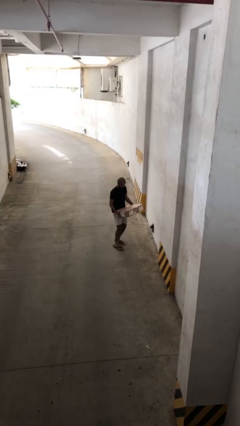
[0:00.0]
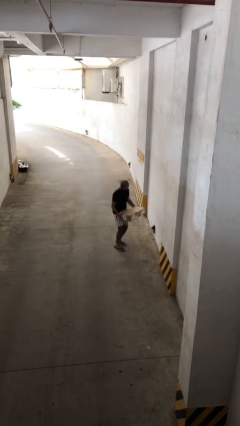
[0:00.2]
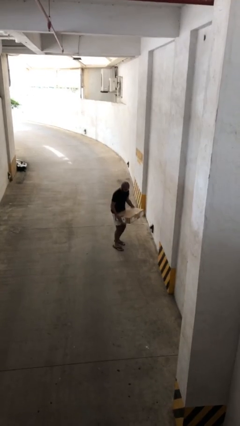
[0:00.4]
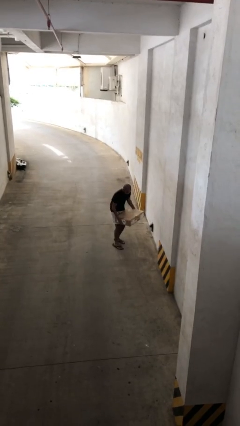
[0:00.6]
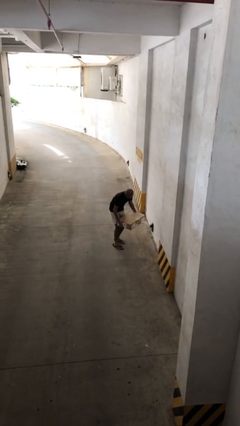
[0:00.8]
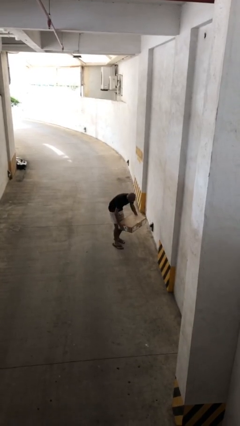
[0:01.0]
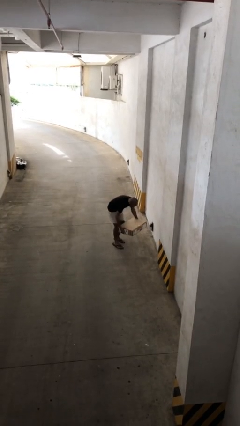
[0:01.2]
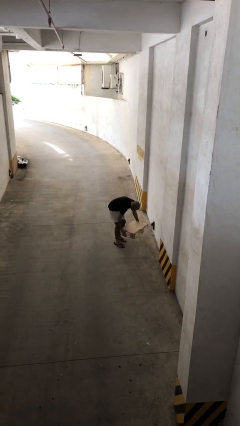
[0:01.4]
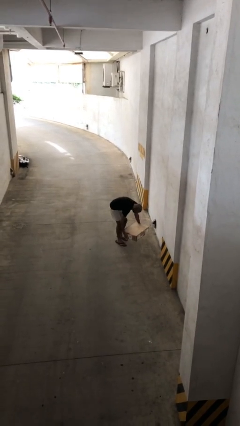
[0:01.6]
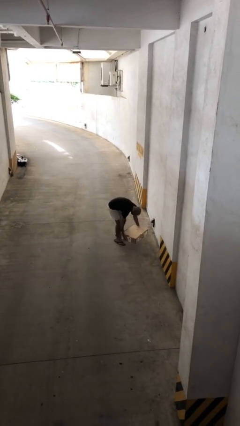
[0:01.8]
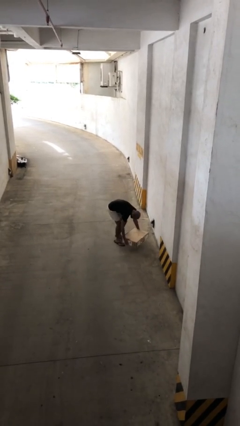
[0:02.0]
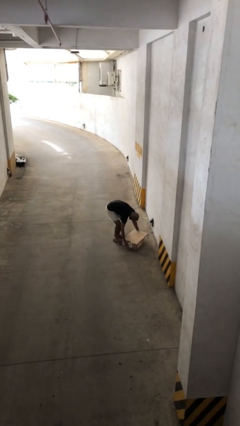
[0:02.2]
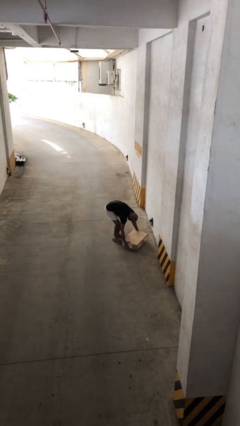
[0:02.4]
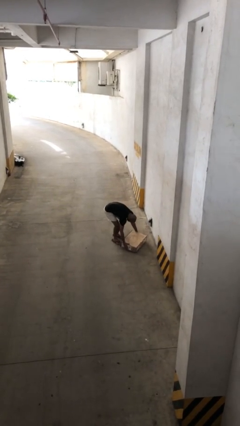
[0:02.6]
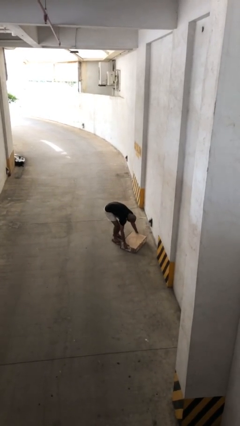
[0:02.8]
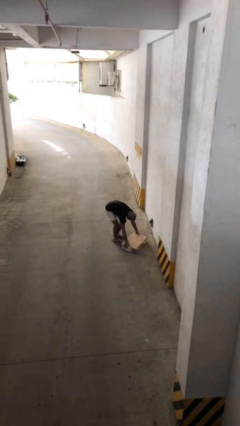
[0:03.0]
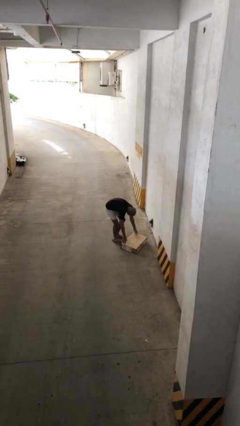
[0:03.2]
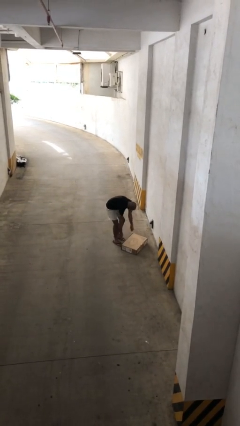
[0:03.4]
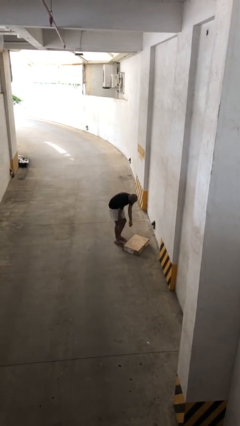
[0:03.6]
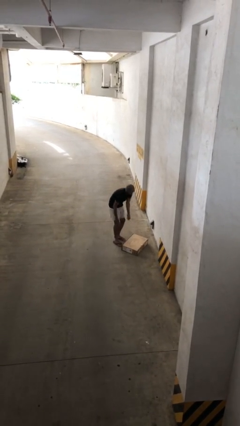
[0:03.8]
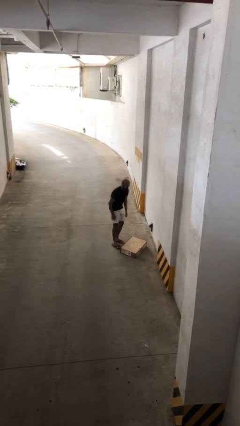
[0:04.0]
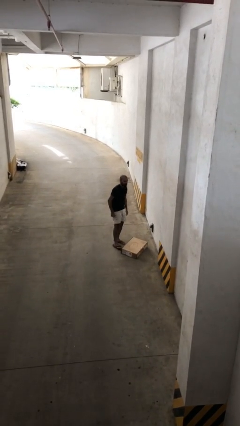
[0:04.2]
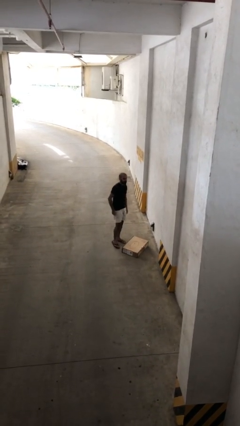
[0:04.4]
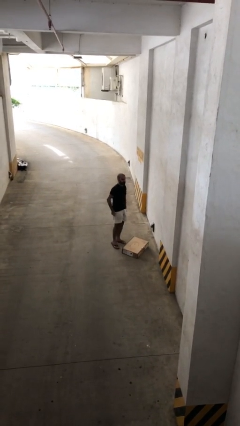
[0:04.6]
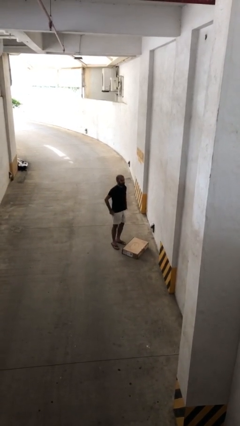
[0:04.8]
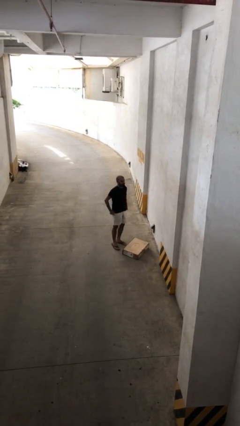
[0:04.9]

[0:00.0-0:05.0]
person puts down object on floor

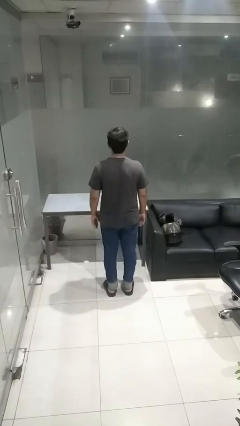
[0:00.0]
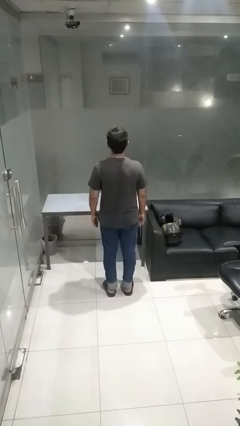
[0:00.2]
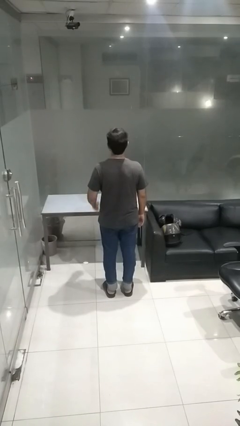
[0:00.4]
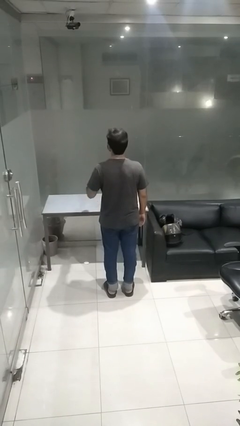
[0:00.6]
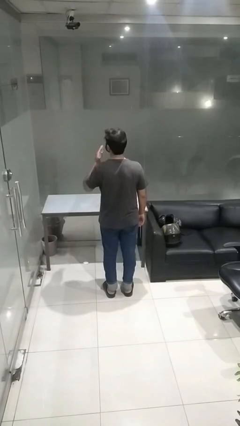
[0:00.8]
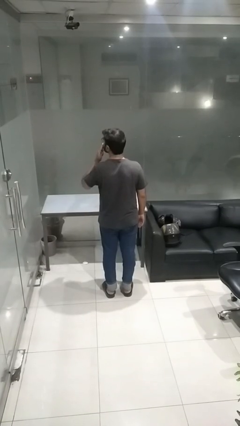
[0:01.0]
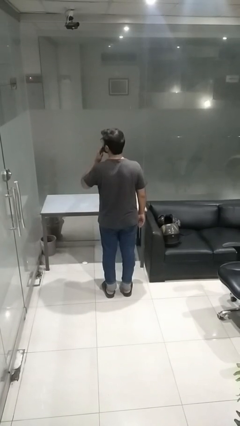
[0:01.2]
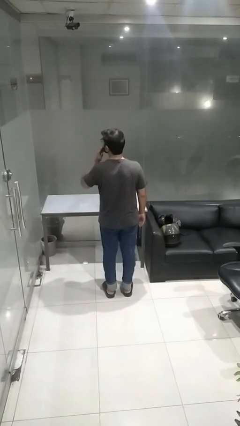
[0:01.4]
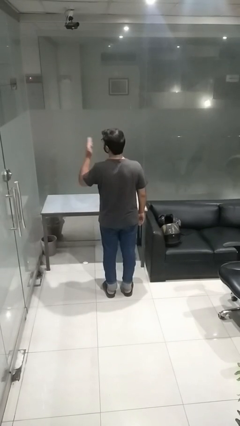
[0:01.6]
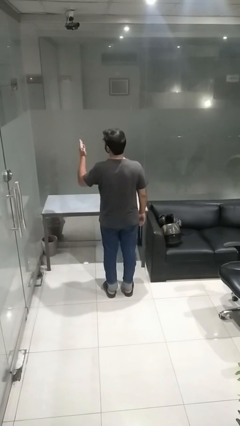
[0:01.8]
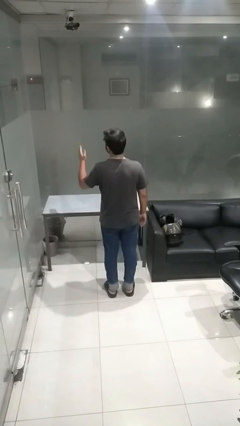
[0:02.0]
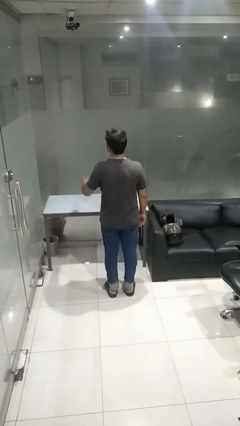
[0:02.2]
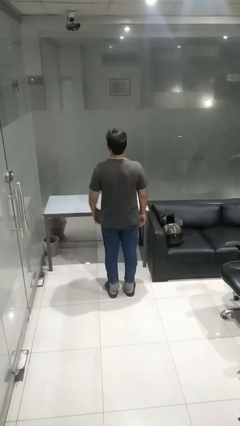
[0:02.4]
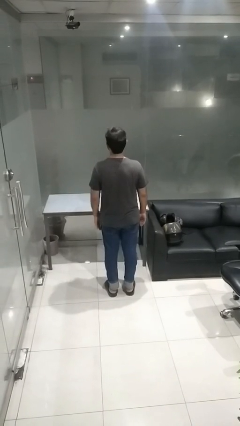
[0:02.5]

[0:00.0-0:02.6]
person gestures blow kiss

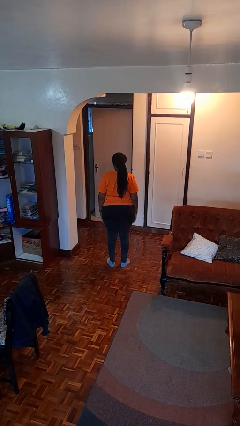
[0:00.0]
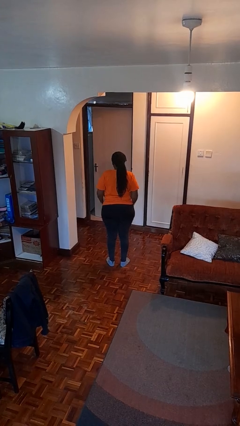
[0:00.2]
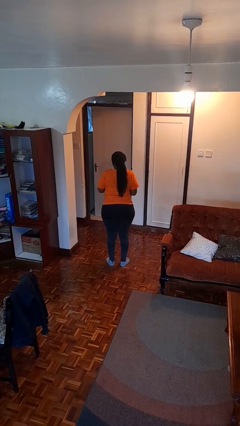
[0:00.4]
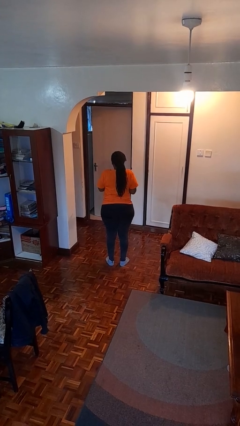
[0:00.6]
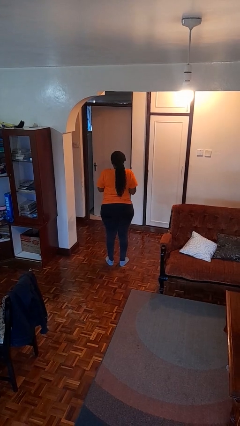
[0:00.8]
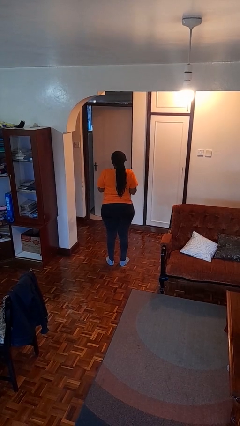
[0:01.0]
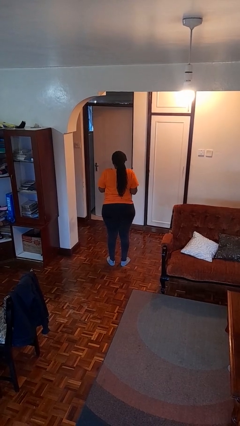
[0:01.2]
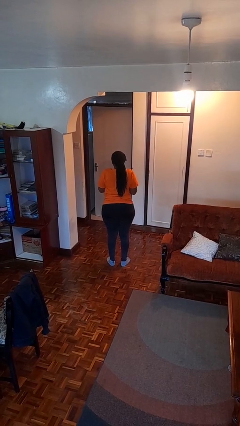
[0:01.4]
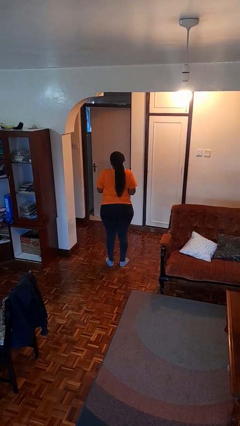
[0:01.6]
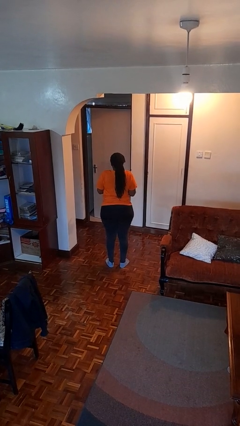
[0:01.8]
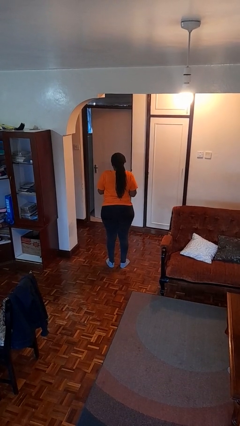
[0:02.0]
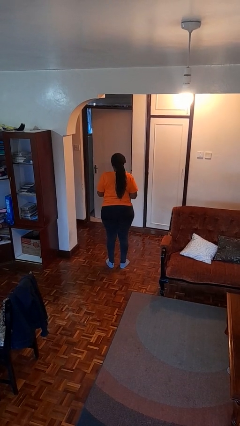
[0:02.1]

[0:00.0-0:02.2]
person shrugs

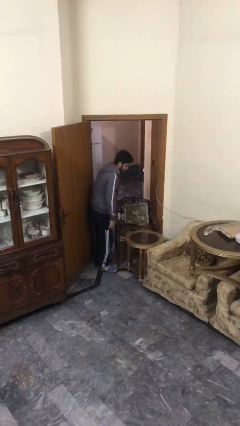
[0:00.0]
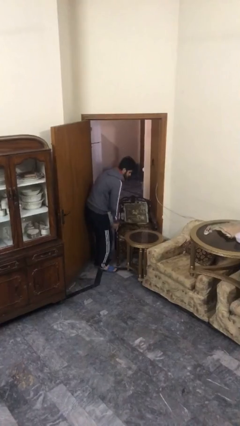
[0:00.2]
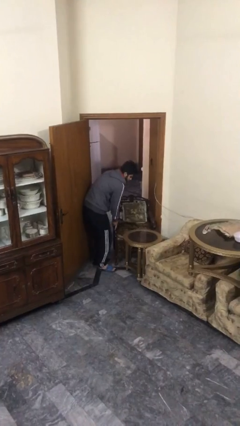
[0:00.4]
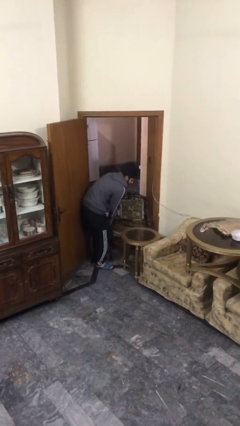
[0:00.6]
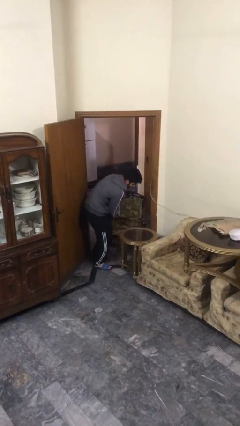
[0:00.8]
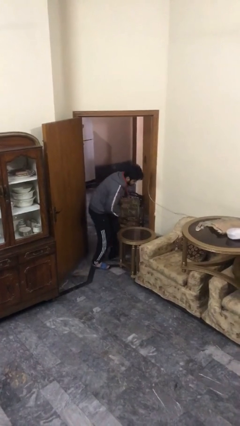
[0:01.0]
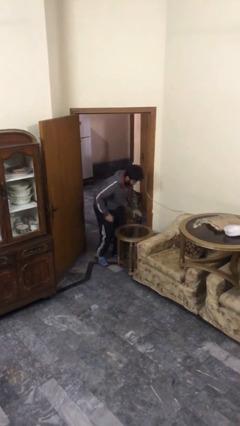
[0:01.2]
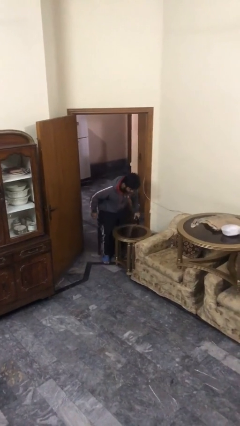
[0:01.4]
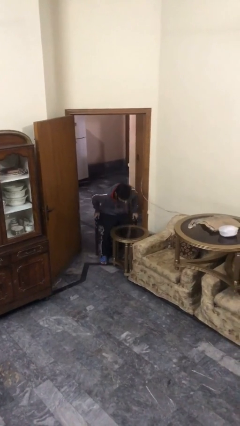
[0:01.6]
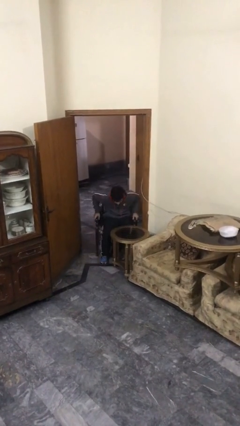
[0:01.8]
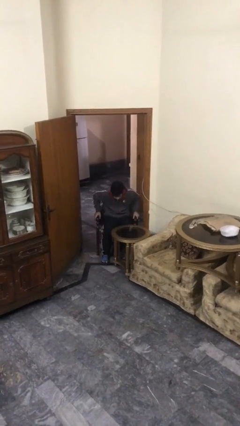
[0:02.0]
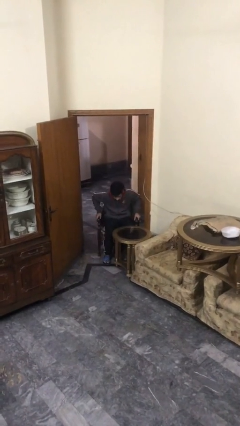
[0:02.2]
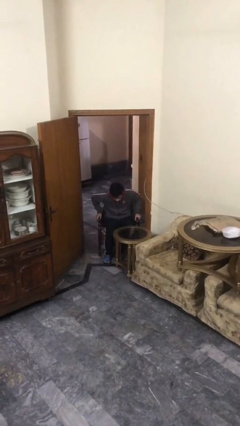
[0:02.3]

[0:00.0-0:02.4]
person sits down

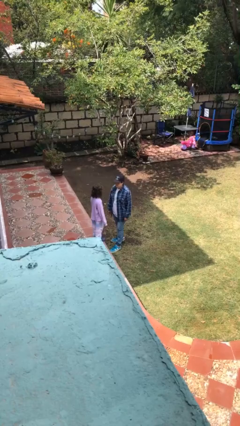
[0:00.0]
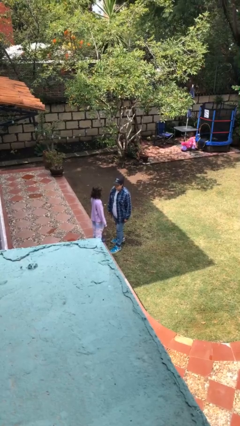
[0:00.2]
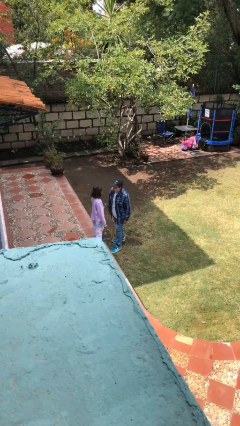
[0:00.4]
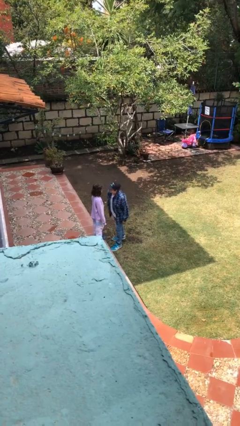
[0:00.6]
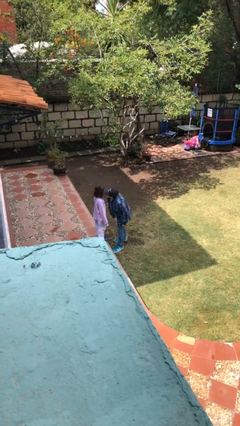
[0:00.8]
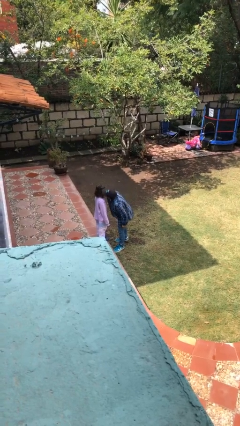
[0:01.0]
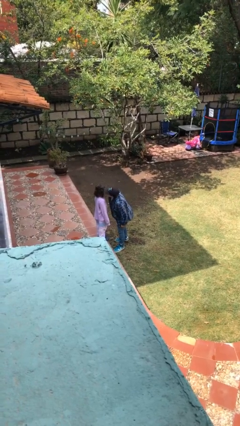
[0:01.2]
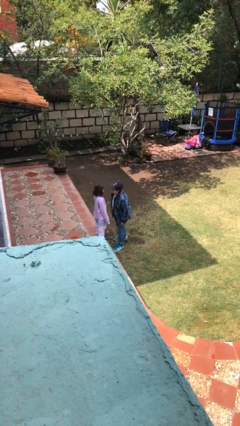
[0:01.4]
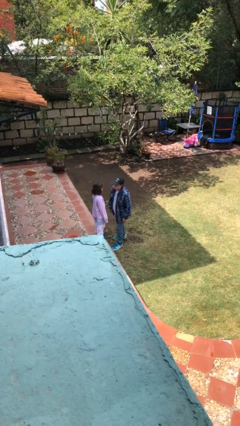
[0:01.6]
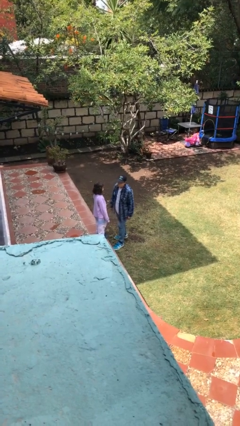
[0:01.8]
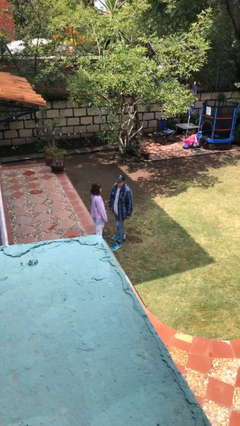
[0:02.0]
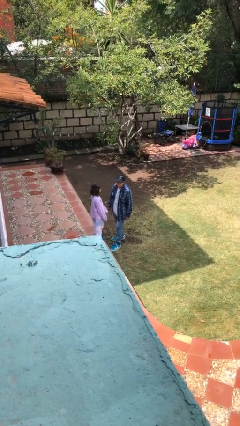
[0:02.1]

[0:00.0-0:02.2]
person kisses cheek of person

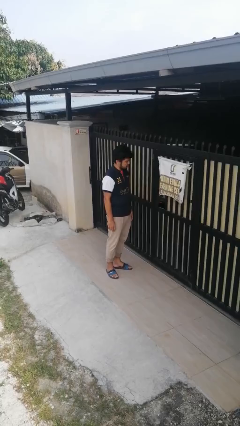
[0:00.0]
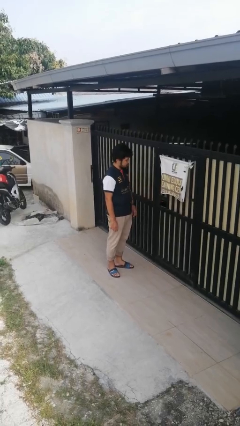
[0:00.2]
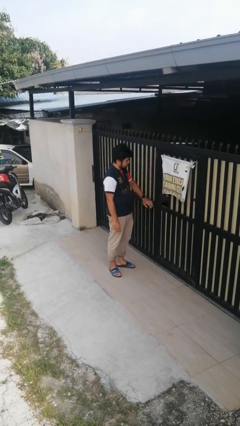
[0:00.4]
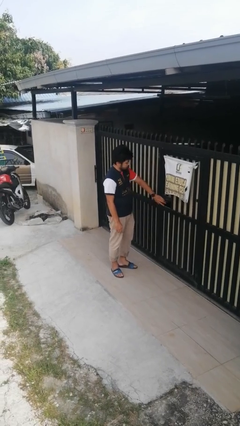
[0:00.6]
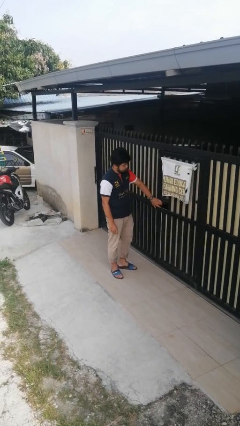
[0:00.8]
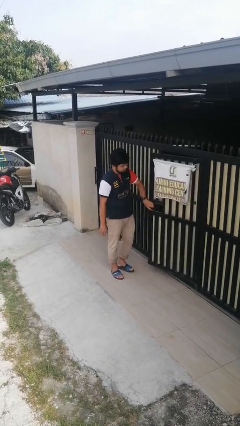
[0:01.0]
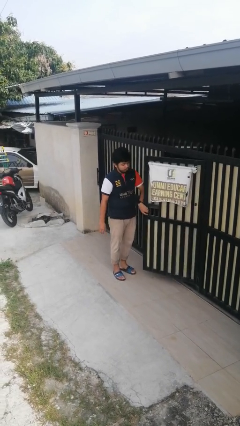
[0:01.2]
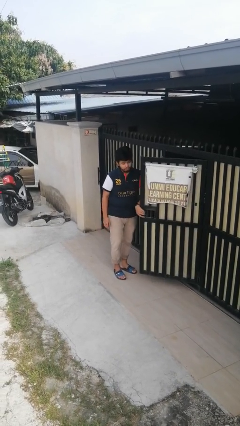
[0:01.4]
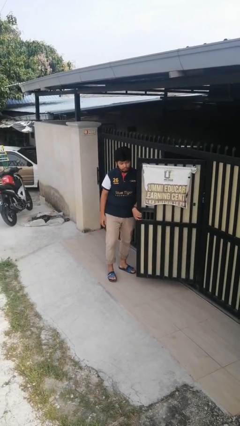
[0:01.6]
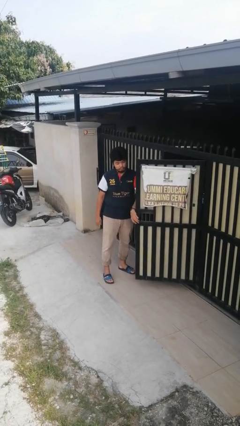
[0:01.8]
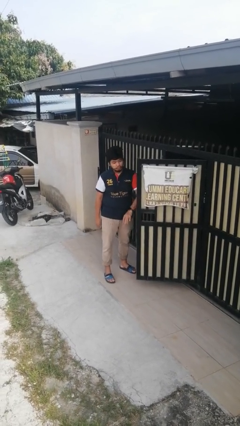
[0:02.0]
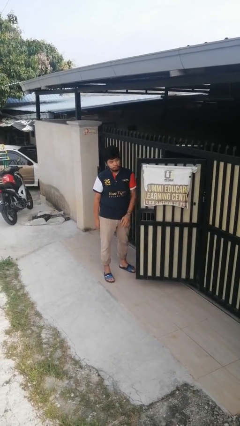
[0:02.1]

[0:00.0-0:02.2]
person opens gate

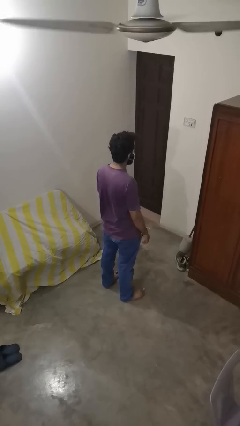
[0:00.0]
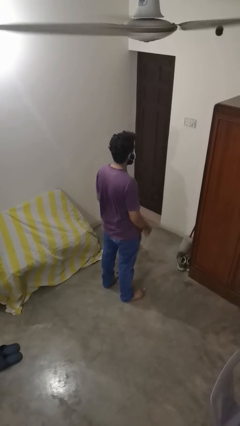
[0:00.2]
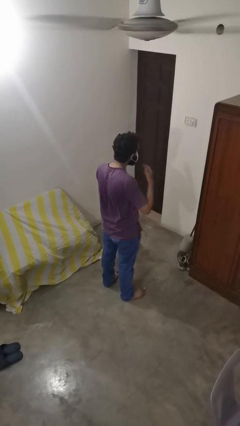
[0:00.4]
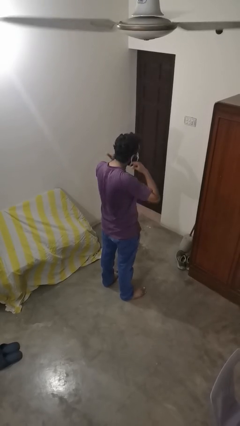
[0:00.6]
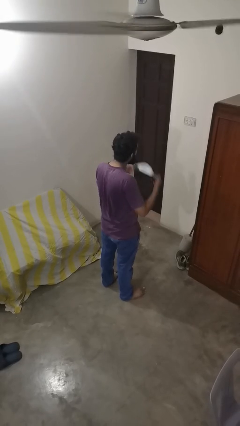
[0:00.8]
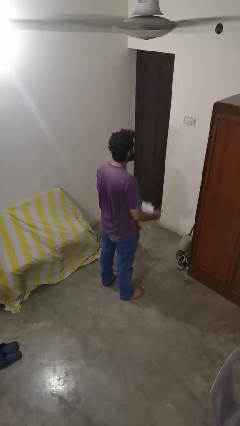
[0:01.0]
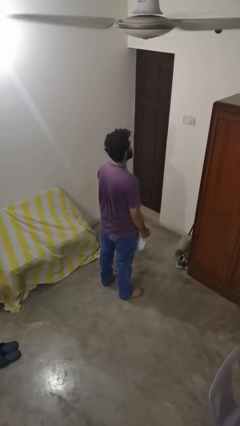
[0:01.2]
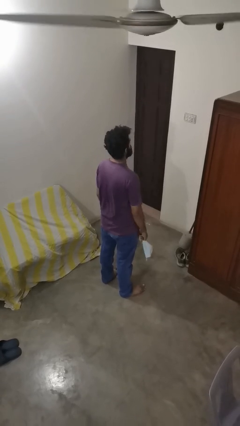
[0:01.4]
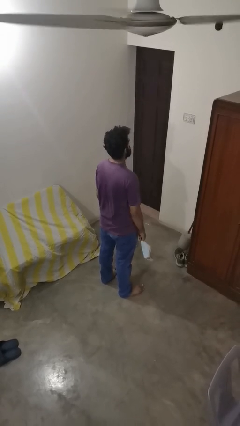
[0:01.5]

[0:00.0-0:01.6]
person takes off facemask
